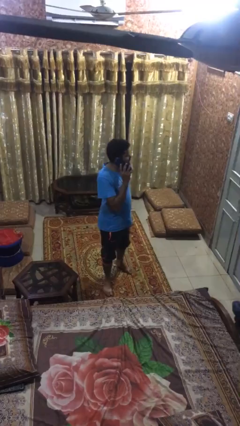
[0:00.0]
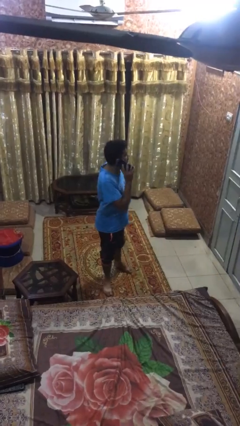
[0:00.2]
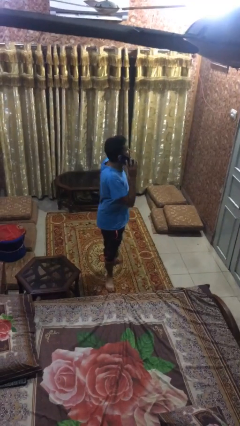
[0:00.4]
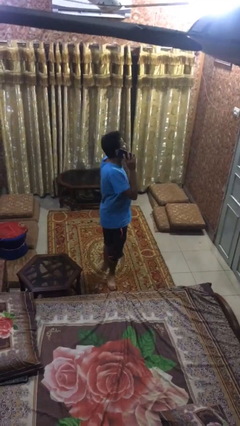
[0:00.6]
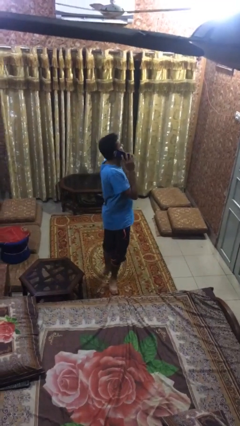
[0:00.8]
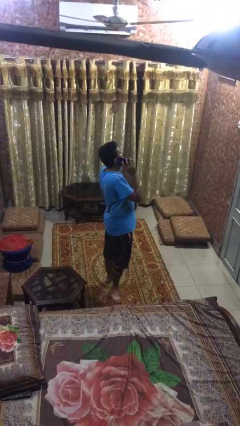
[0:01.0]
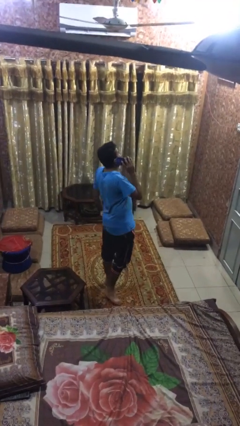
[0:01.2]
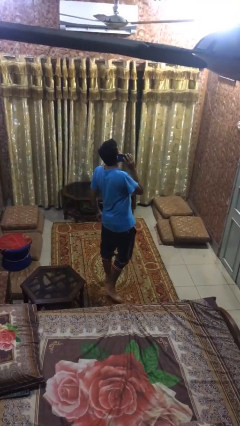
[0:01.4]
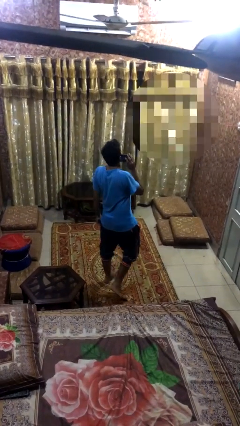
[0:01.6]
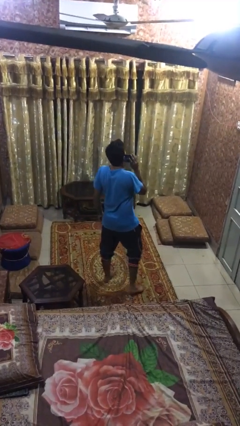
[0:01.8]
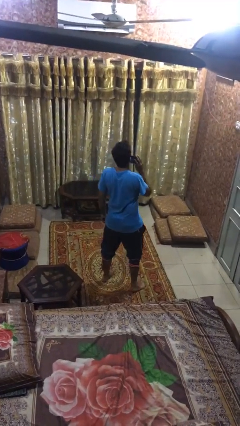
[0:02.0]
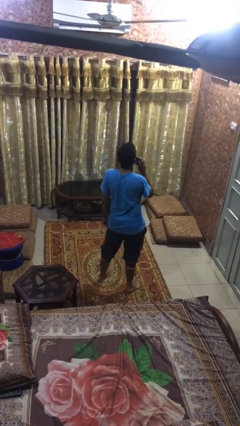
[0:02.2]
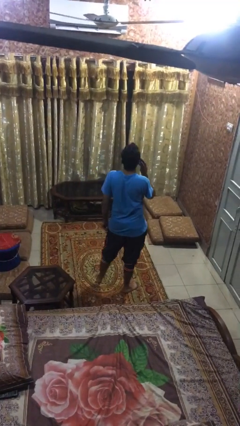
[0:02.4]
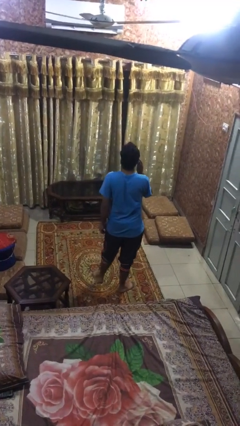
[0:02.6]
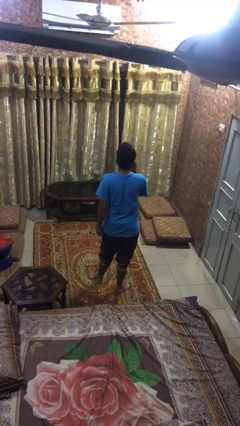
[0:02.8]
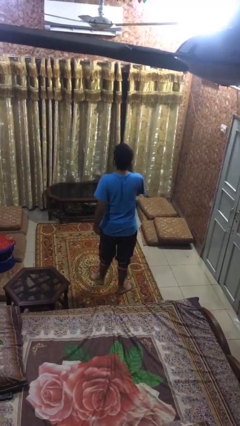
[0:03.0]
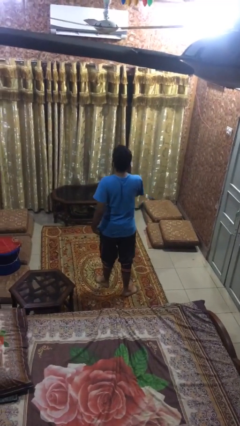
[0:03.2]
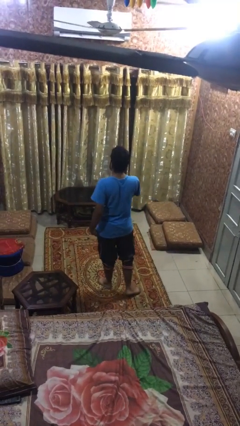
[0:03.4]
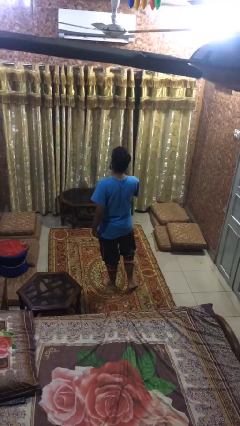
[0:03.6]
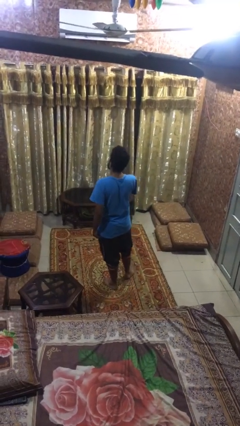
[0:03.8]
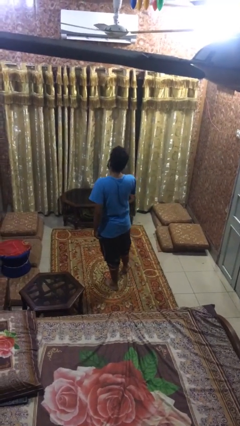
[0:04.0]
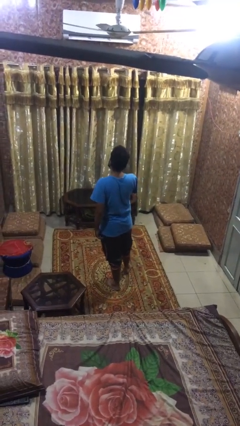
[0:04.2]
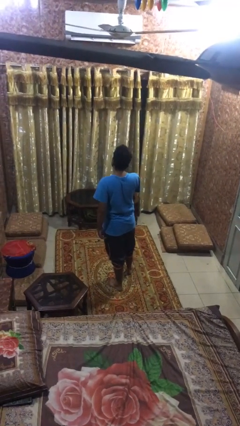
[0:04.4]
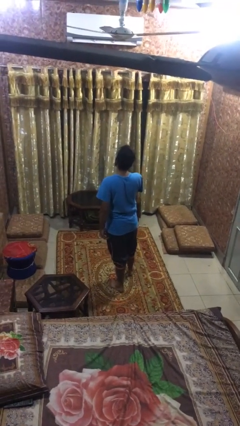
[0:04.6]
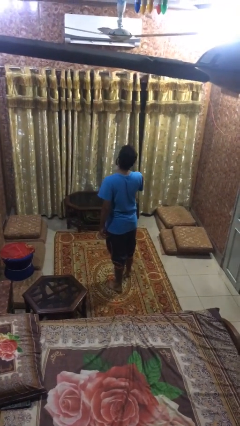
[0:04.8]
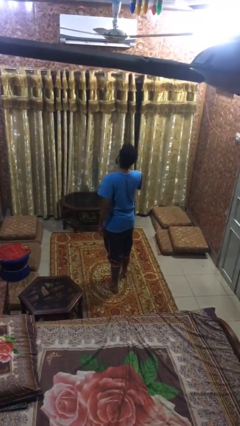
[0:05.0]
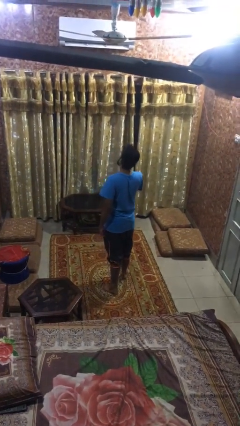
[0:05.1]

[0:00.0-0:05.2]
person talks on phone

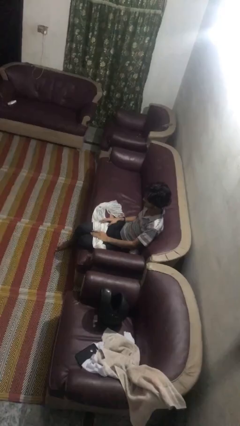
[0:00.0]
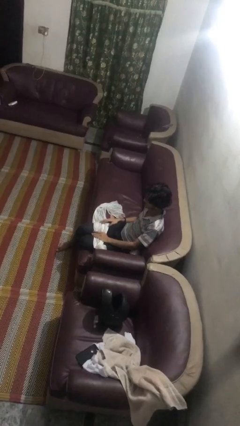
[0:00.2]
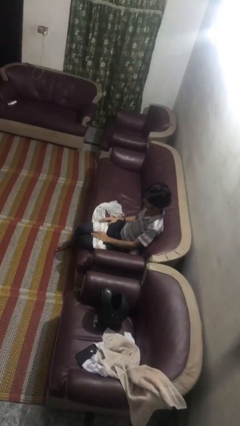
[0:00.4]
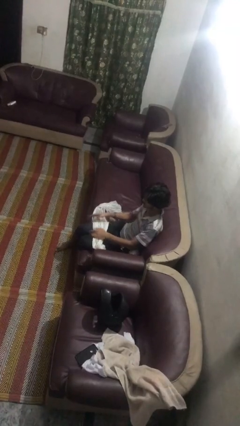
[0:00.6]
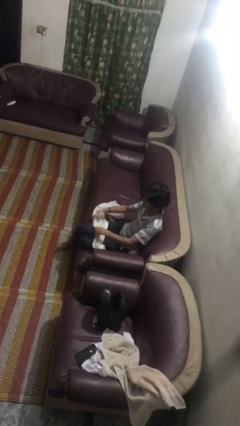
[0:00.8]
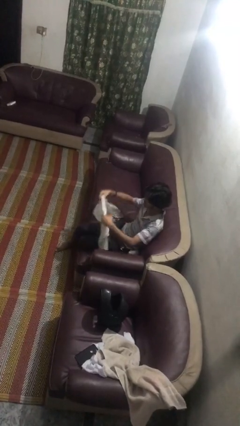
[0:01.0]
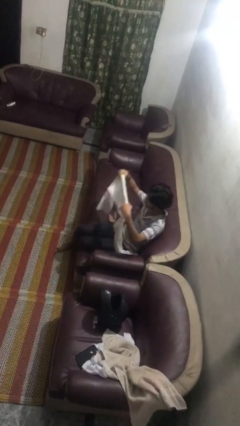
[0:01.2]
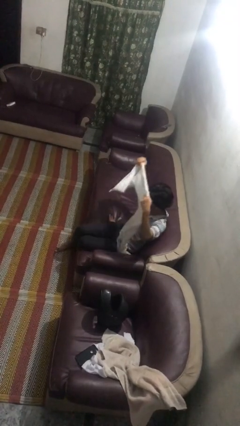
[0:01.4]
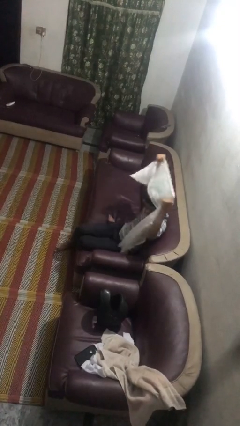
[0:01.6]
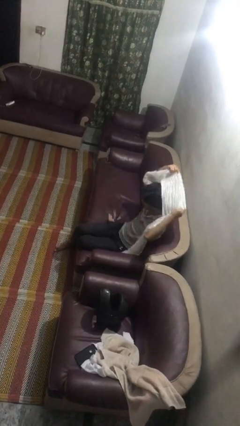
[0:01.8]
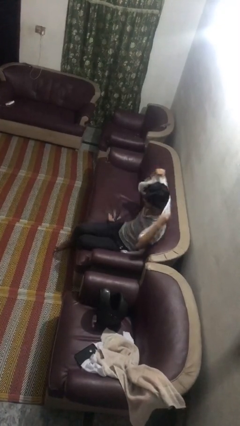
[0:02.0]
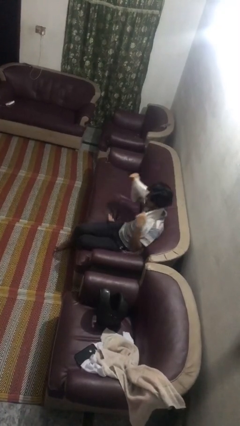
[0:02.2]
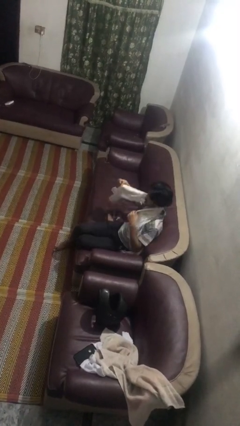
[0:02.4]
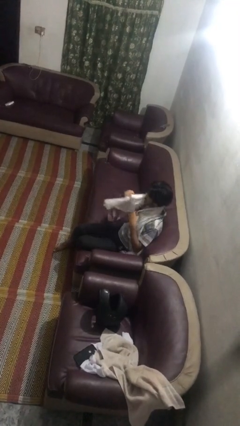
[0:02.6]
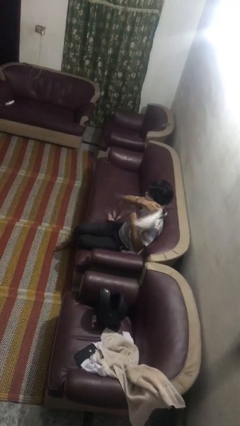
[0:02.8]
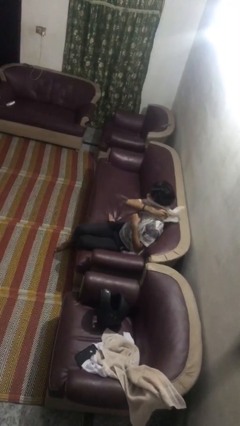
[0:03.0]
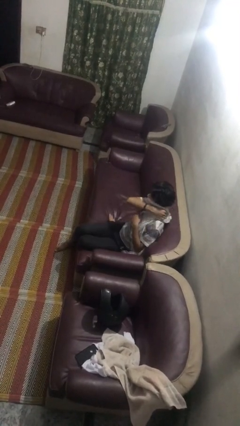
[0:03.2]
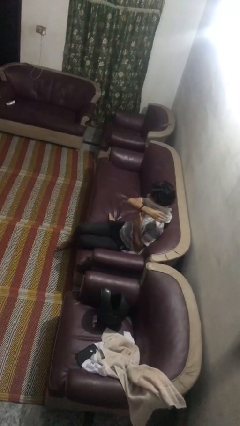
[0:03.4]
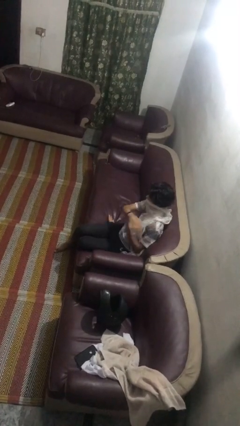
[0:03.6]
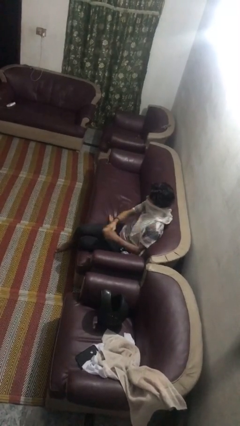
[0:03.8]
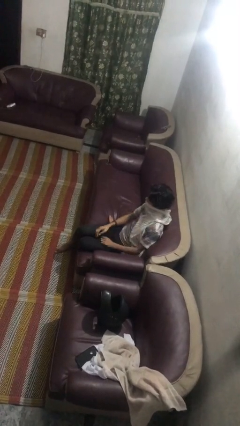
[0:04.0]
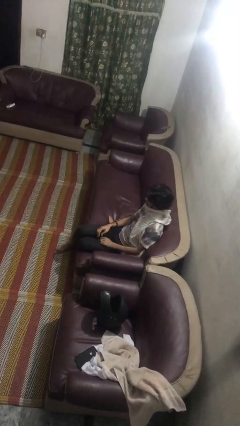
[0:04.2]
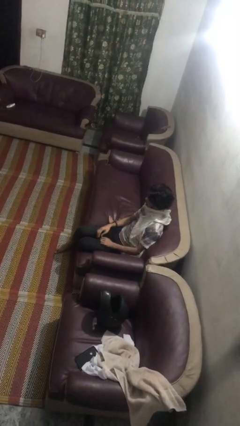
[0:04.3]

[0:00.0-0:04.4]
person puts on scarf

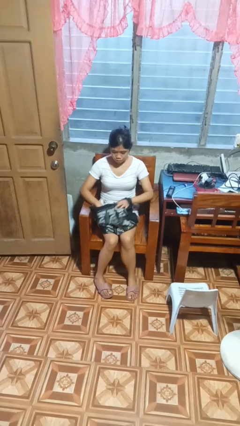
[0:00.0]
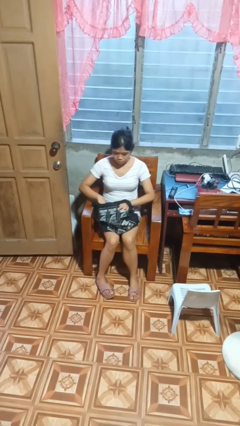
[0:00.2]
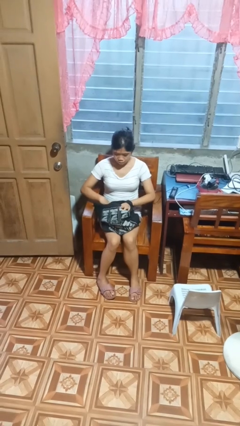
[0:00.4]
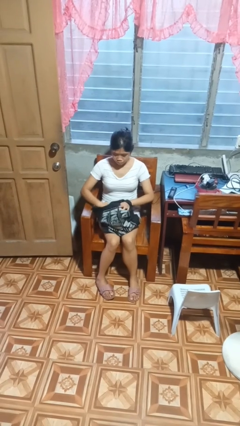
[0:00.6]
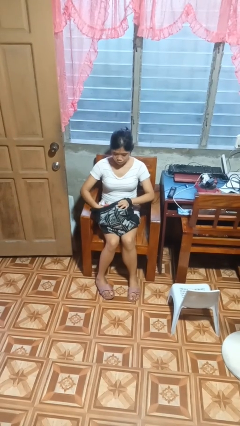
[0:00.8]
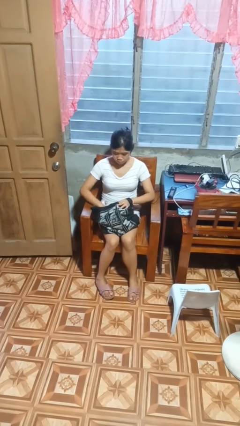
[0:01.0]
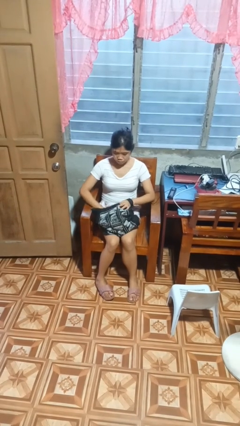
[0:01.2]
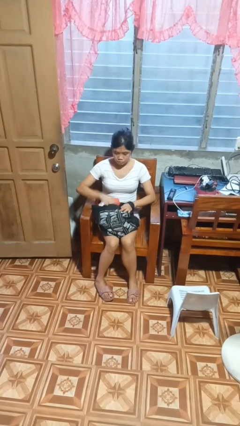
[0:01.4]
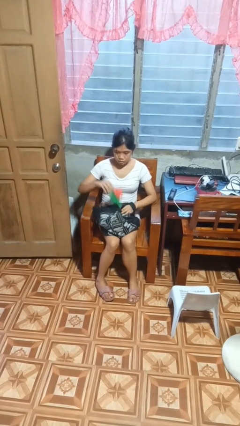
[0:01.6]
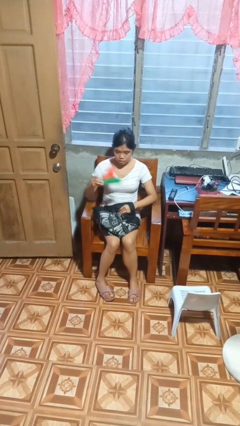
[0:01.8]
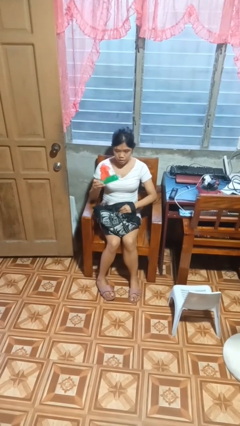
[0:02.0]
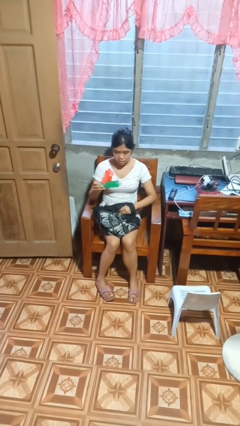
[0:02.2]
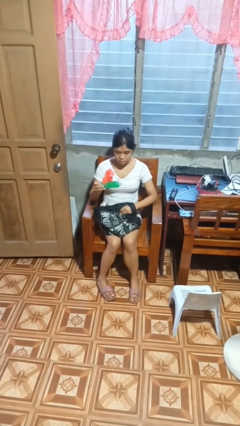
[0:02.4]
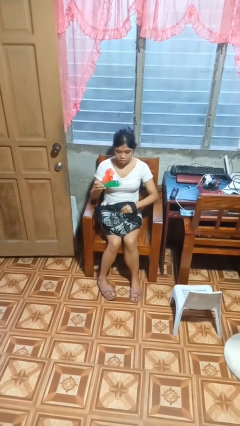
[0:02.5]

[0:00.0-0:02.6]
person searches in bag

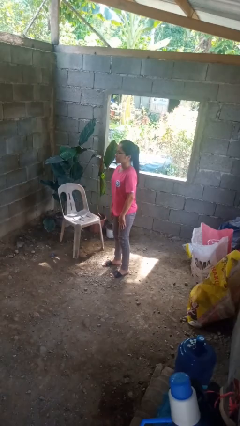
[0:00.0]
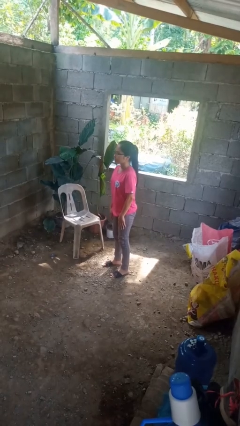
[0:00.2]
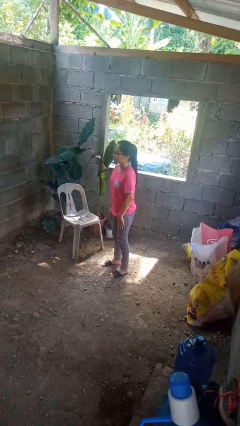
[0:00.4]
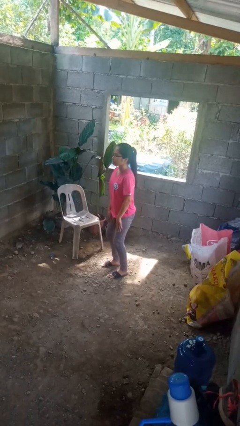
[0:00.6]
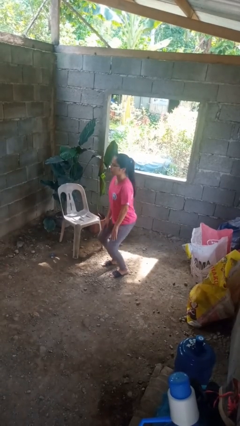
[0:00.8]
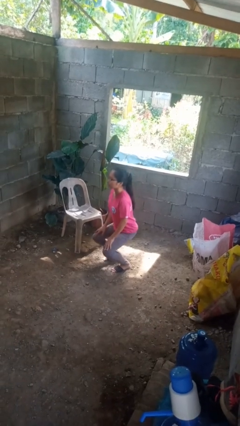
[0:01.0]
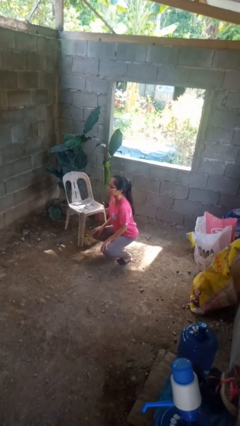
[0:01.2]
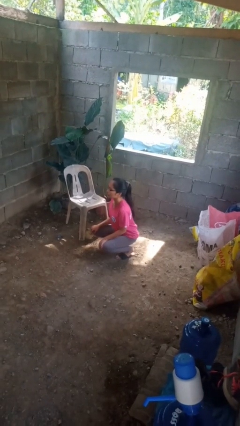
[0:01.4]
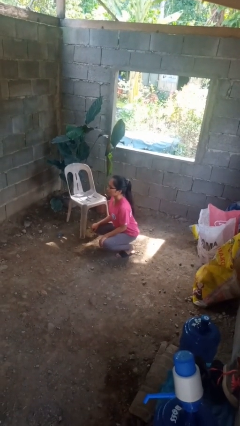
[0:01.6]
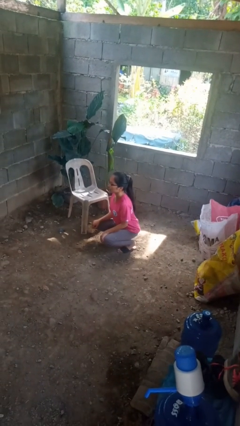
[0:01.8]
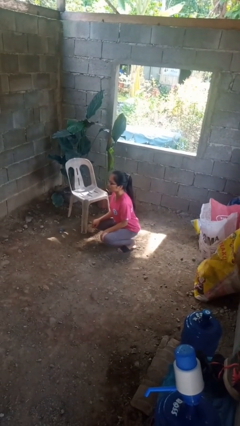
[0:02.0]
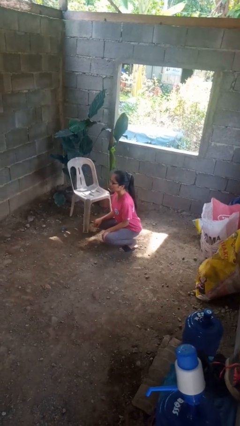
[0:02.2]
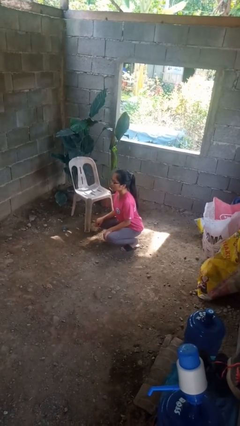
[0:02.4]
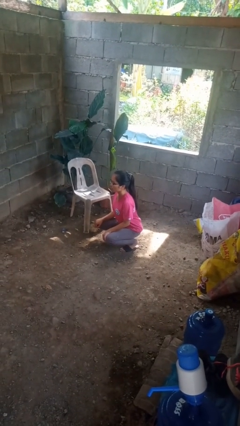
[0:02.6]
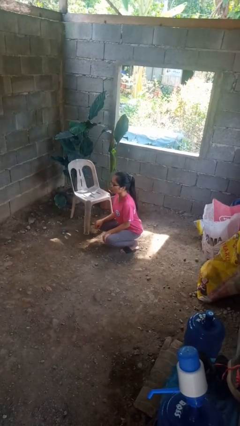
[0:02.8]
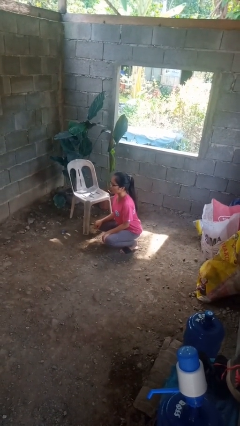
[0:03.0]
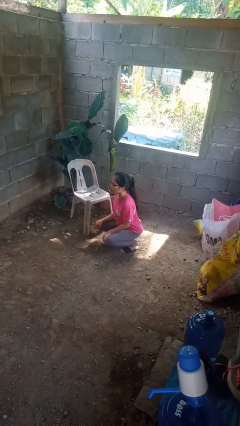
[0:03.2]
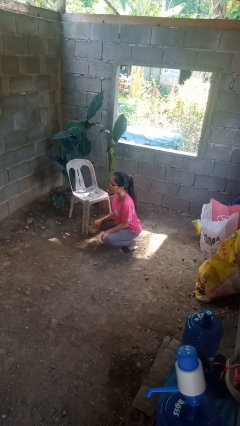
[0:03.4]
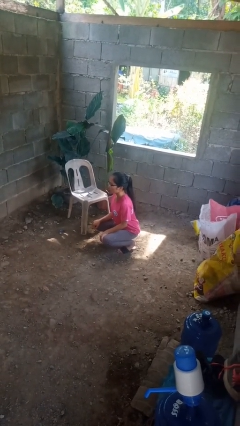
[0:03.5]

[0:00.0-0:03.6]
person squats

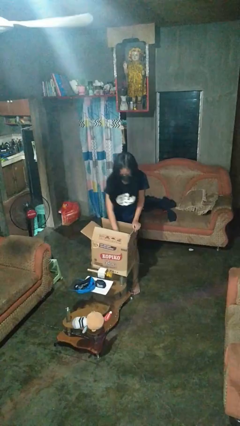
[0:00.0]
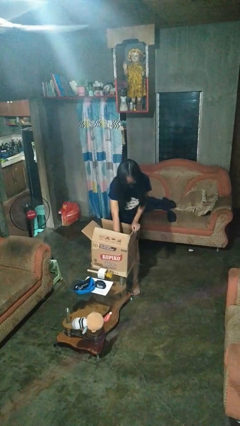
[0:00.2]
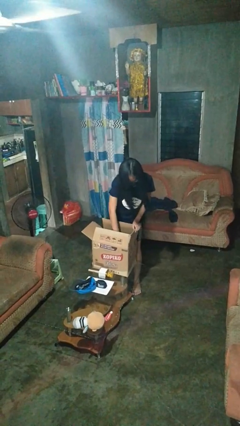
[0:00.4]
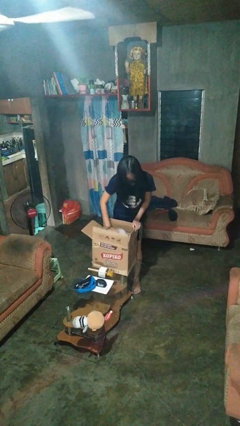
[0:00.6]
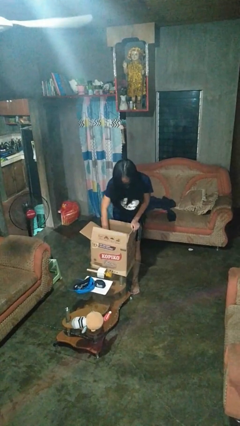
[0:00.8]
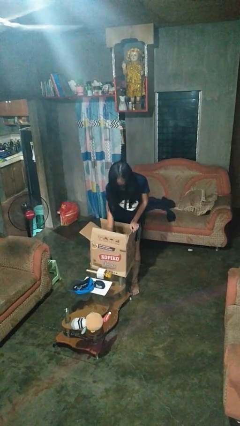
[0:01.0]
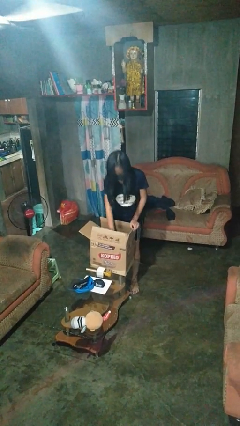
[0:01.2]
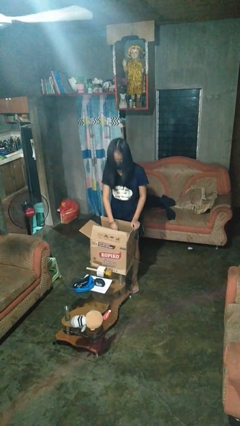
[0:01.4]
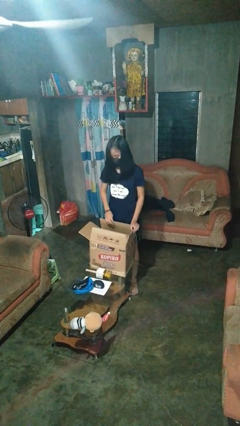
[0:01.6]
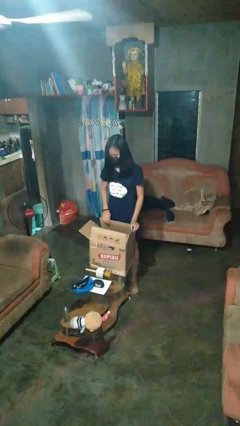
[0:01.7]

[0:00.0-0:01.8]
person searches in box
